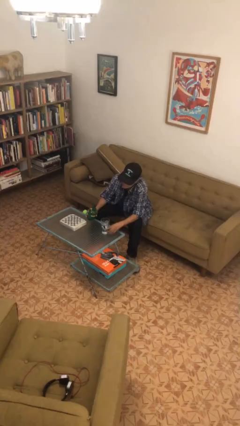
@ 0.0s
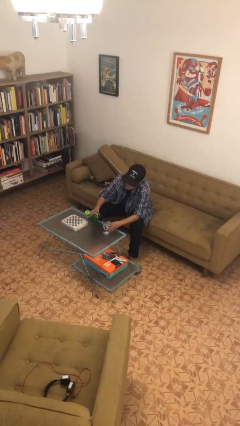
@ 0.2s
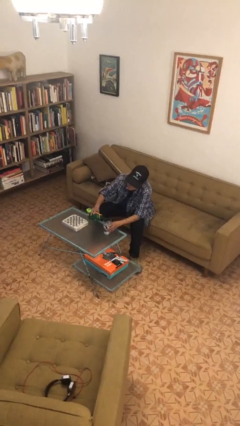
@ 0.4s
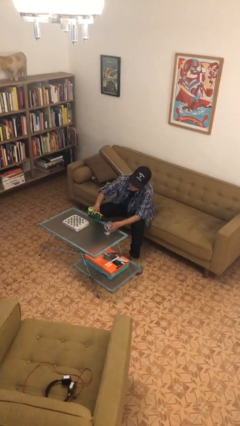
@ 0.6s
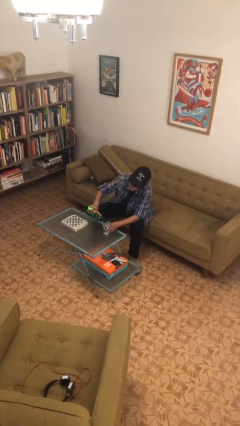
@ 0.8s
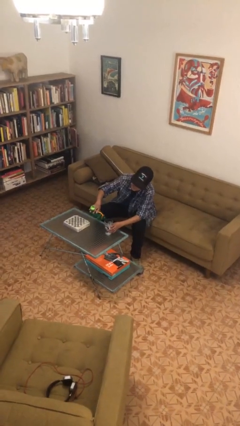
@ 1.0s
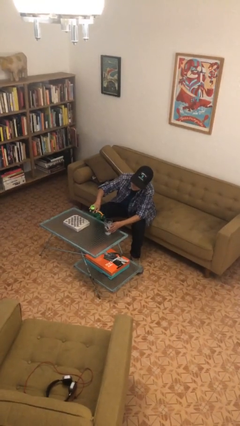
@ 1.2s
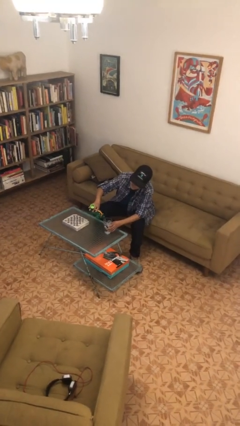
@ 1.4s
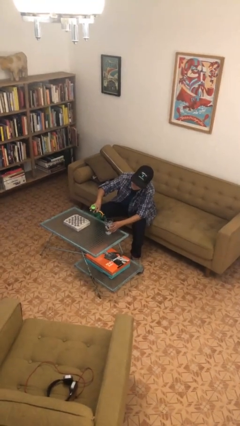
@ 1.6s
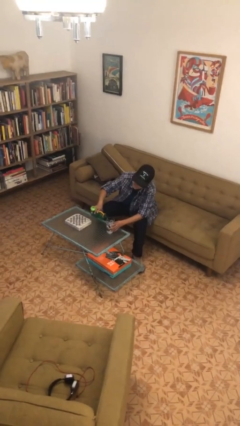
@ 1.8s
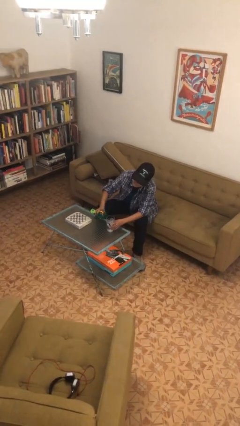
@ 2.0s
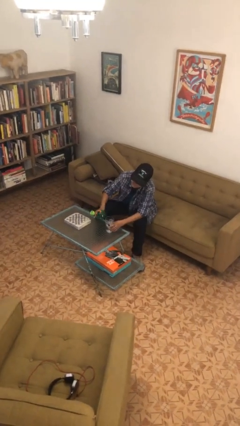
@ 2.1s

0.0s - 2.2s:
person pours liquid into cup

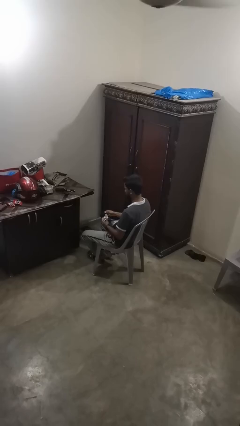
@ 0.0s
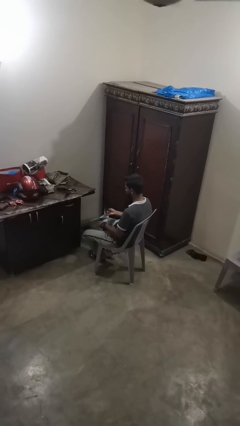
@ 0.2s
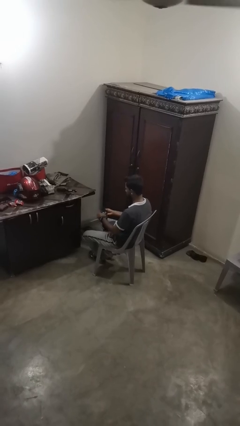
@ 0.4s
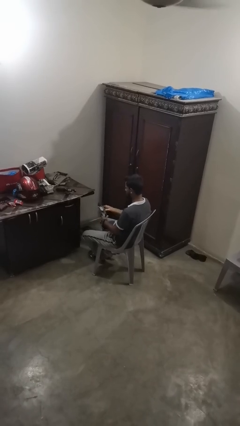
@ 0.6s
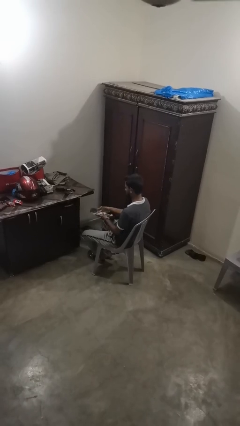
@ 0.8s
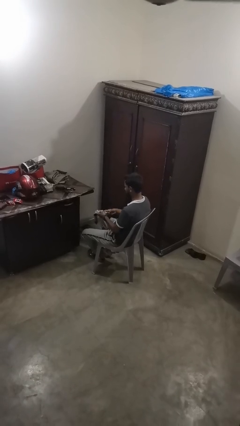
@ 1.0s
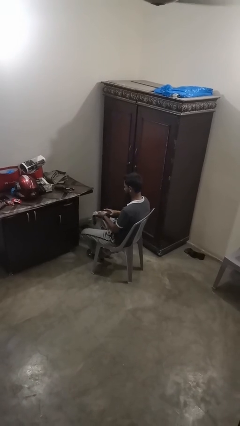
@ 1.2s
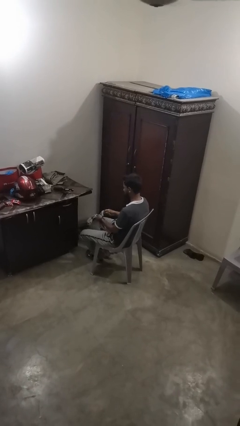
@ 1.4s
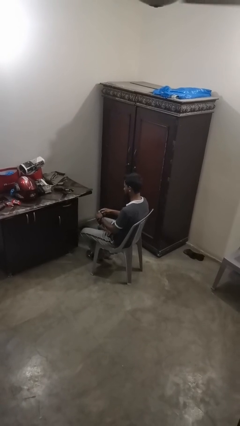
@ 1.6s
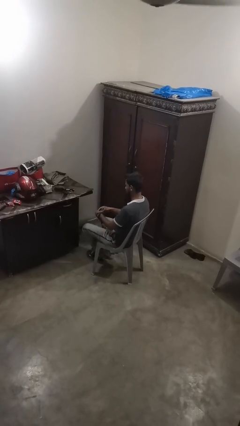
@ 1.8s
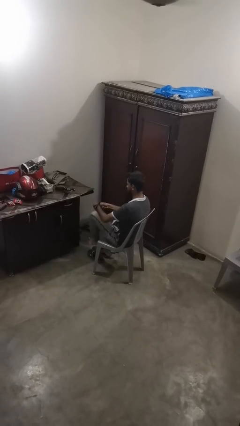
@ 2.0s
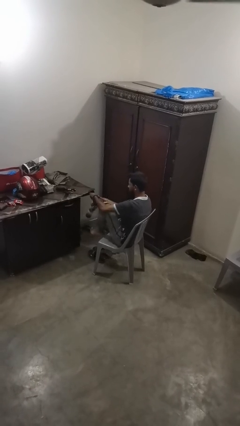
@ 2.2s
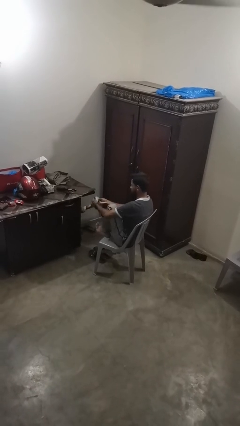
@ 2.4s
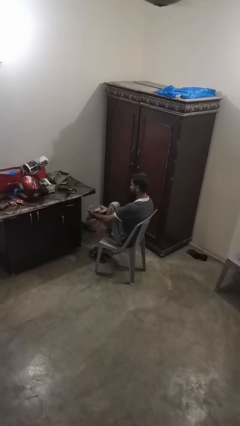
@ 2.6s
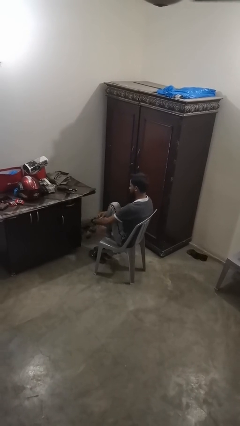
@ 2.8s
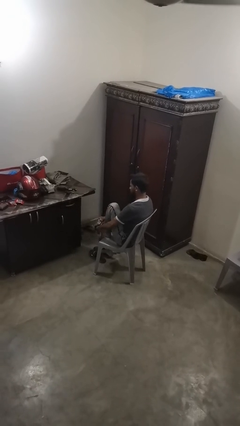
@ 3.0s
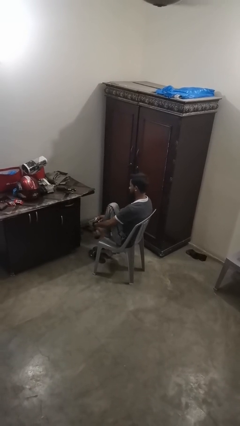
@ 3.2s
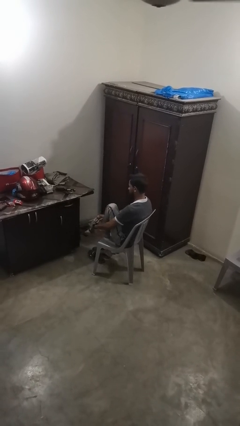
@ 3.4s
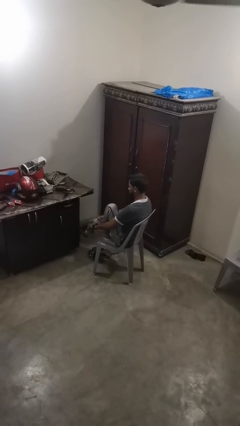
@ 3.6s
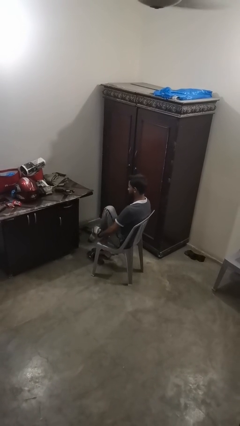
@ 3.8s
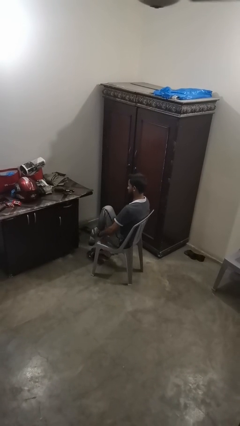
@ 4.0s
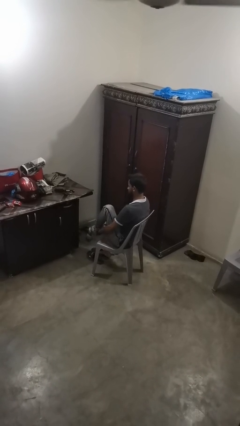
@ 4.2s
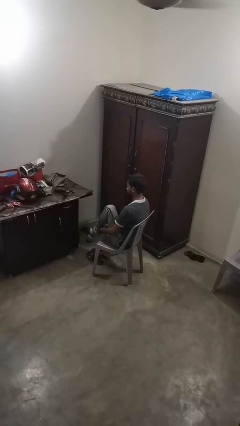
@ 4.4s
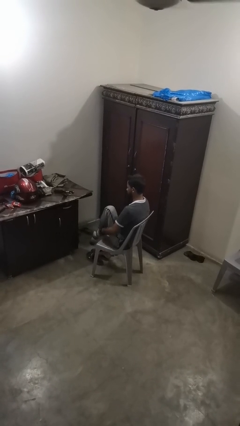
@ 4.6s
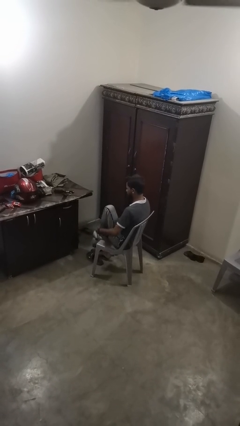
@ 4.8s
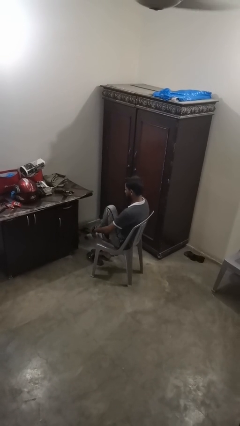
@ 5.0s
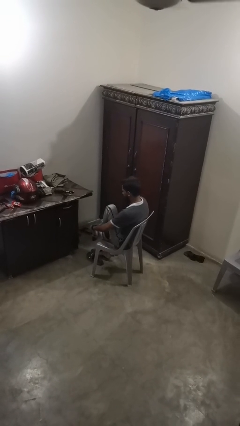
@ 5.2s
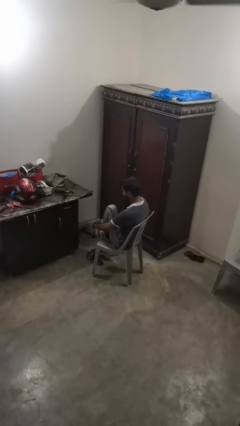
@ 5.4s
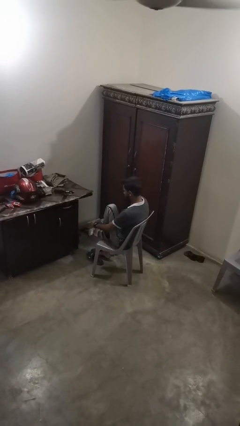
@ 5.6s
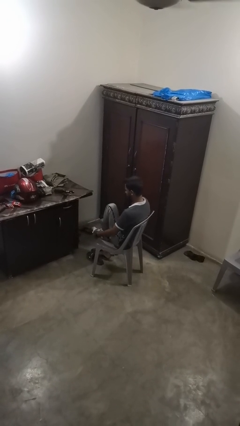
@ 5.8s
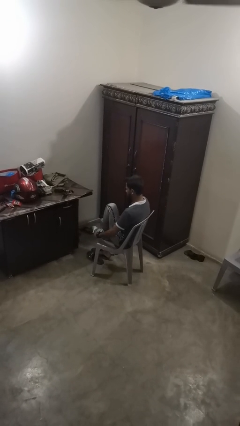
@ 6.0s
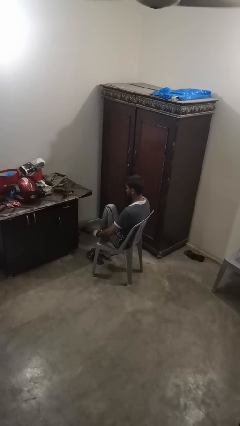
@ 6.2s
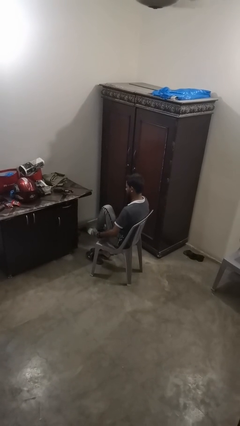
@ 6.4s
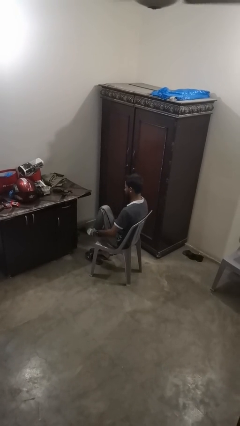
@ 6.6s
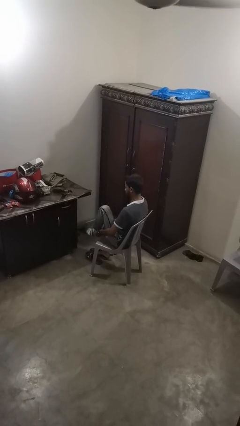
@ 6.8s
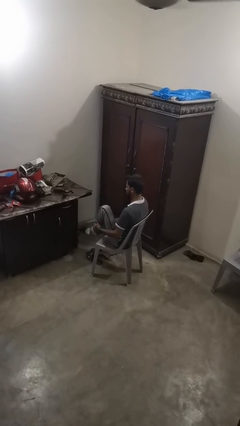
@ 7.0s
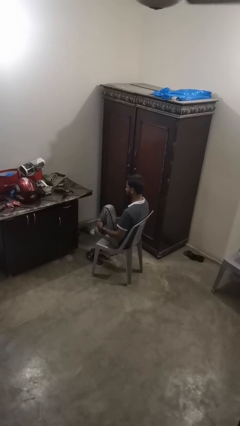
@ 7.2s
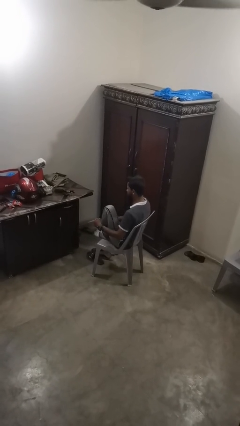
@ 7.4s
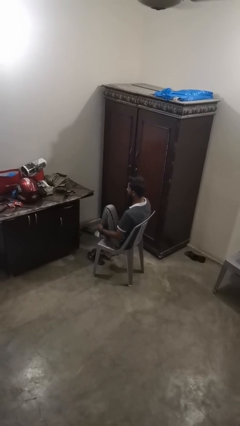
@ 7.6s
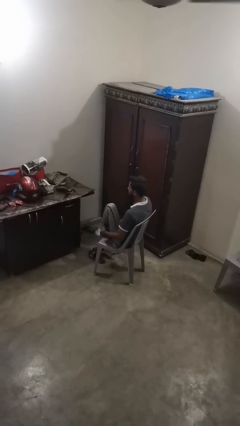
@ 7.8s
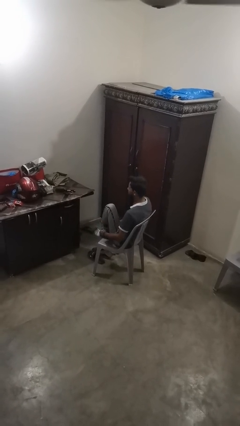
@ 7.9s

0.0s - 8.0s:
person puts on socks

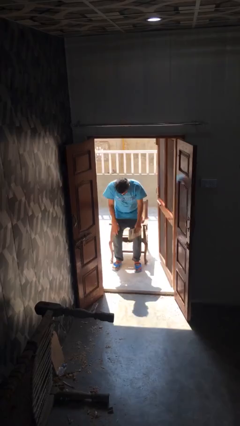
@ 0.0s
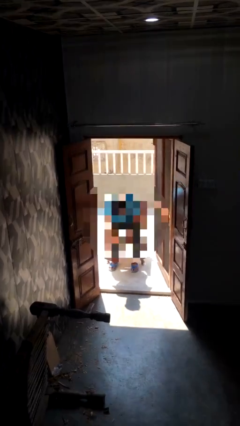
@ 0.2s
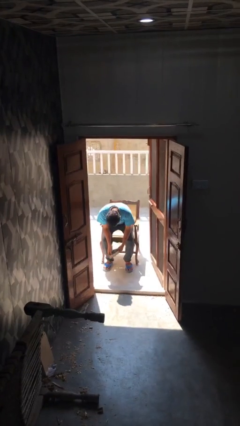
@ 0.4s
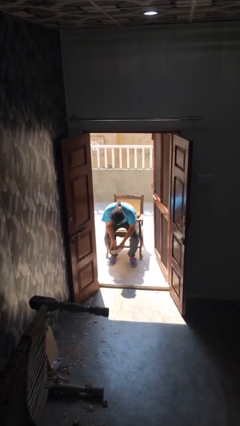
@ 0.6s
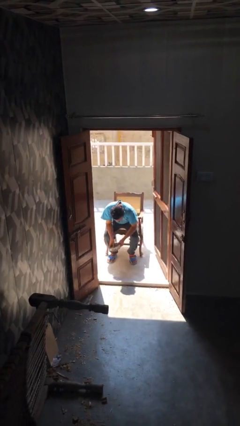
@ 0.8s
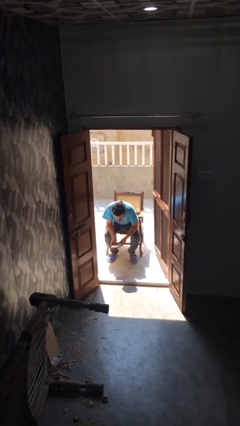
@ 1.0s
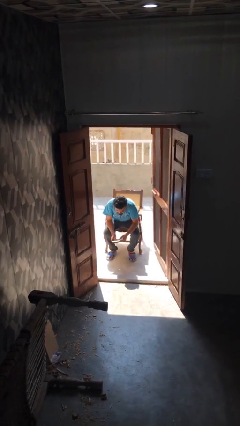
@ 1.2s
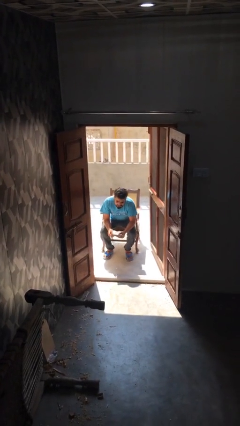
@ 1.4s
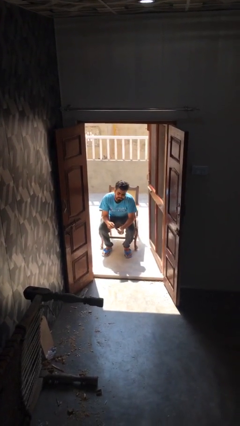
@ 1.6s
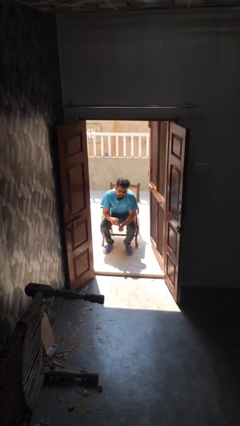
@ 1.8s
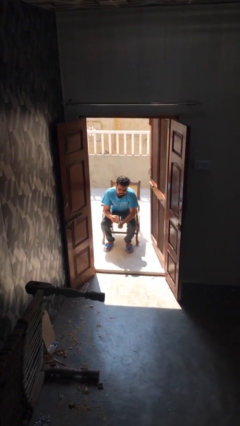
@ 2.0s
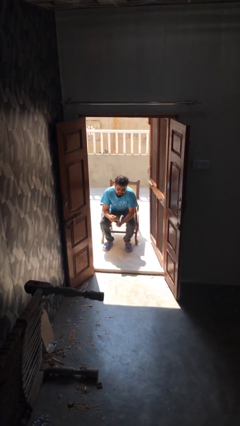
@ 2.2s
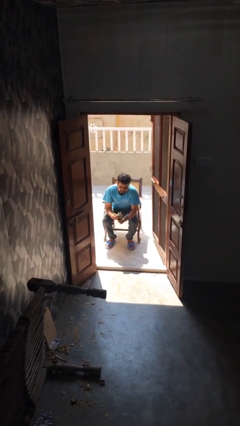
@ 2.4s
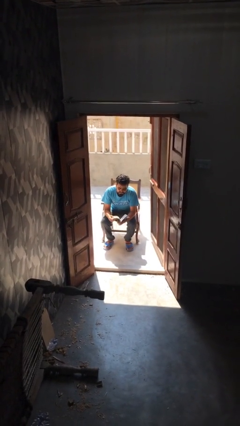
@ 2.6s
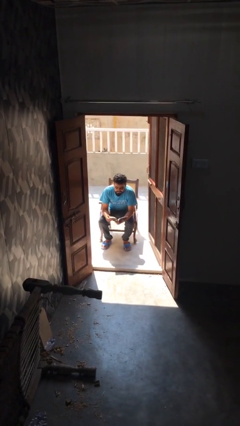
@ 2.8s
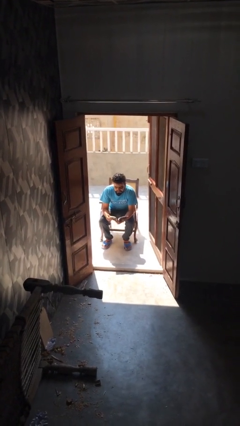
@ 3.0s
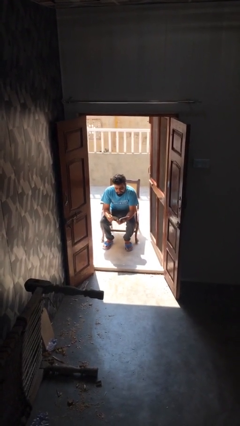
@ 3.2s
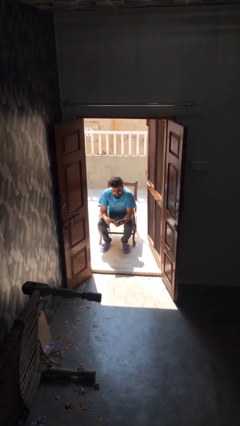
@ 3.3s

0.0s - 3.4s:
person sits down

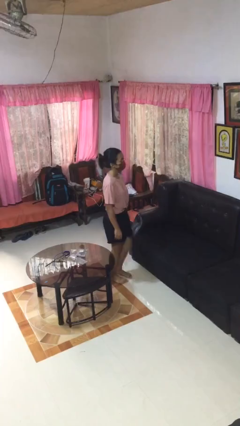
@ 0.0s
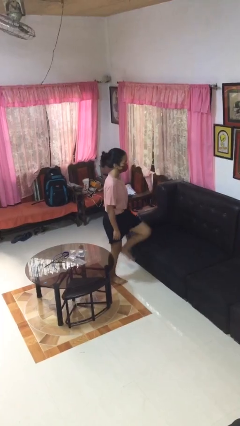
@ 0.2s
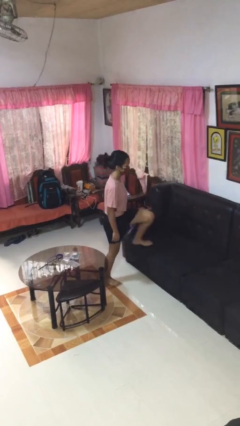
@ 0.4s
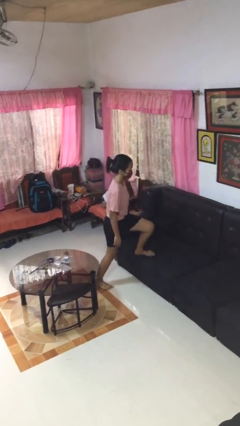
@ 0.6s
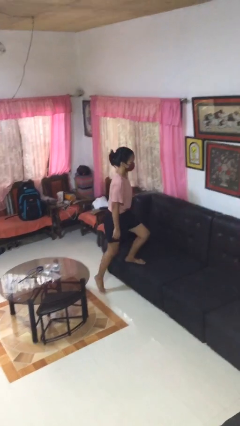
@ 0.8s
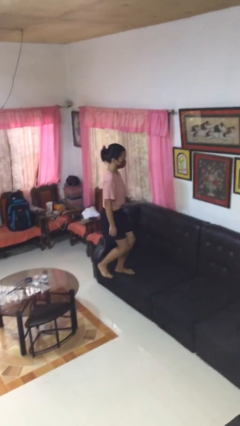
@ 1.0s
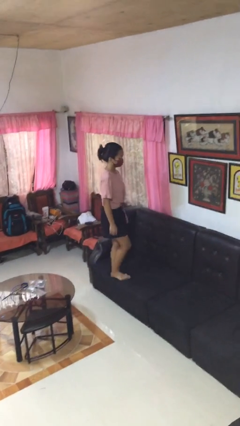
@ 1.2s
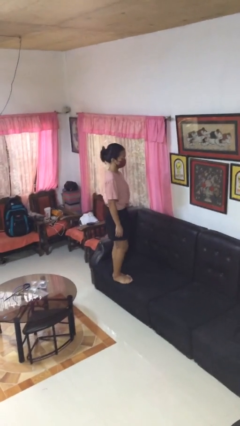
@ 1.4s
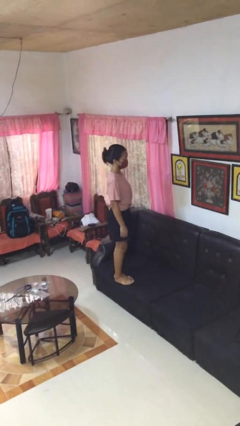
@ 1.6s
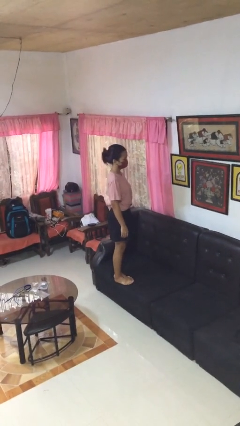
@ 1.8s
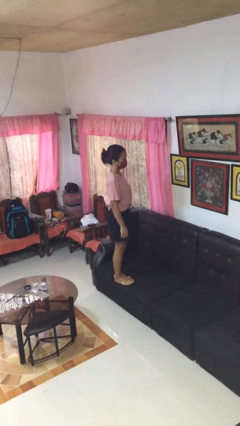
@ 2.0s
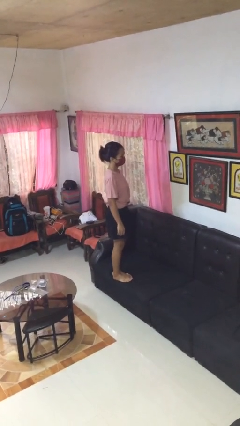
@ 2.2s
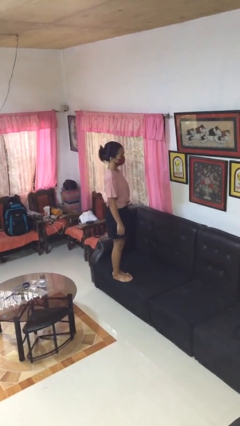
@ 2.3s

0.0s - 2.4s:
person climbs on couch

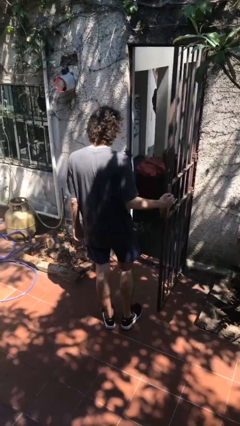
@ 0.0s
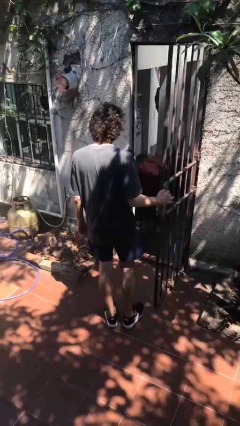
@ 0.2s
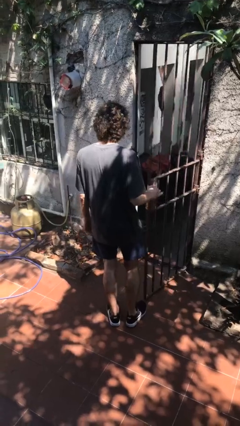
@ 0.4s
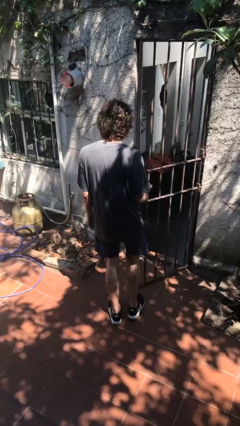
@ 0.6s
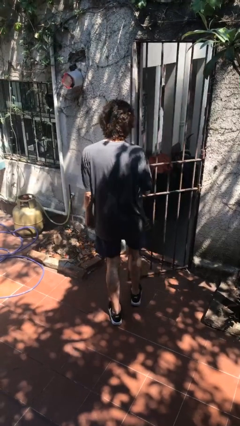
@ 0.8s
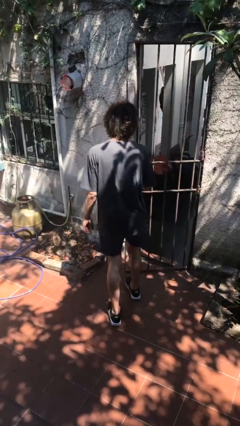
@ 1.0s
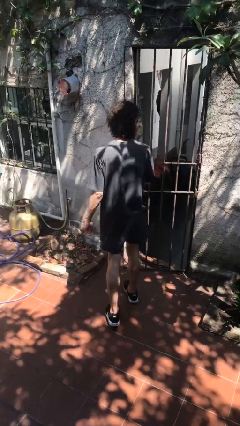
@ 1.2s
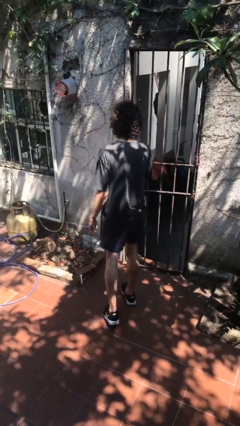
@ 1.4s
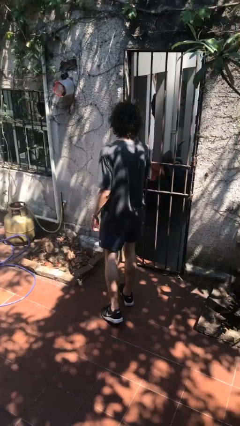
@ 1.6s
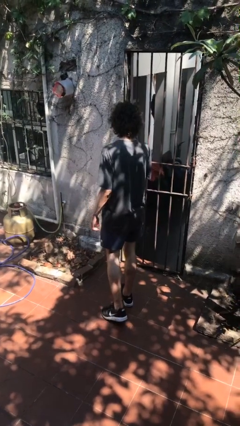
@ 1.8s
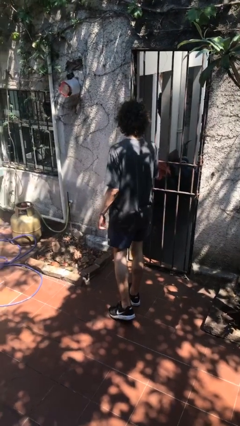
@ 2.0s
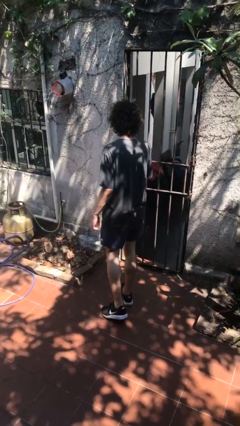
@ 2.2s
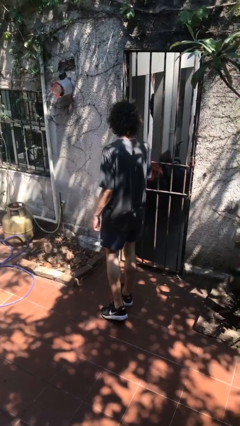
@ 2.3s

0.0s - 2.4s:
person closes facility door
